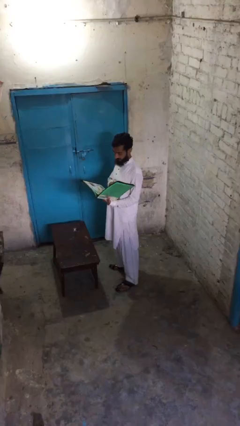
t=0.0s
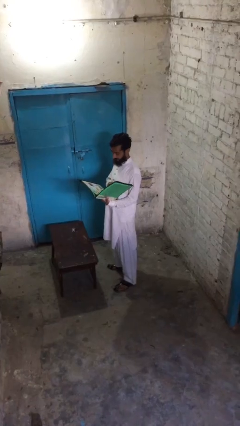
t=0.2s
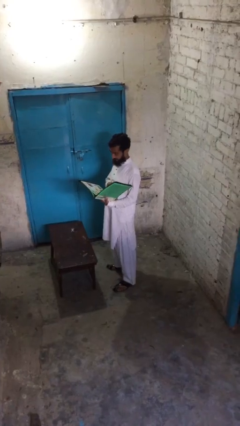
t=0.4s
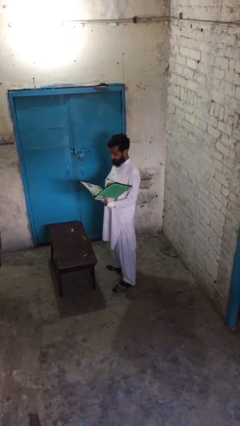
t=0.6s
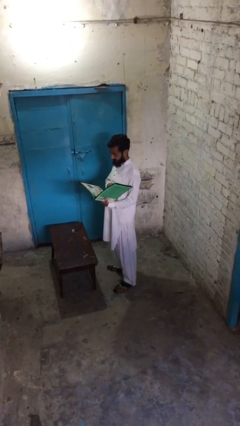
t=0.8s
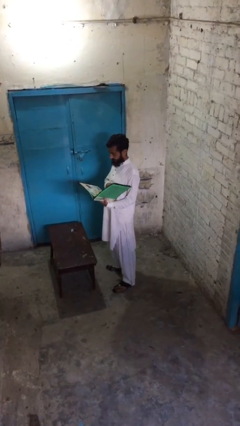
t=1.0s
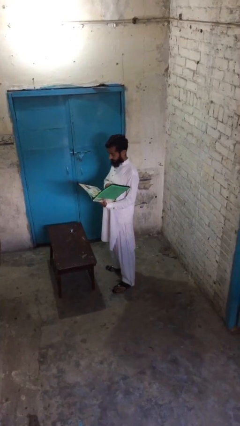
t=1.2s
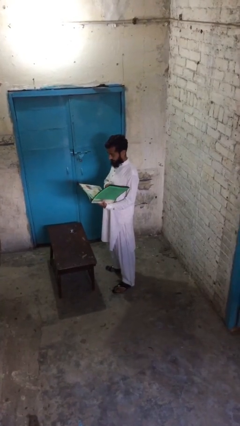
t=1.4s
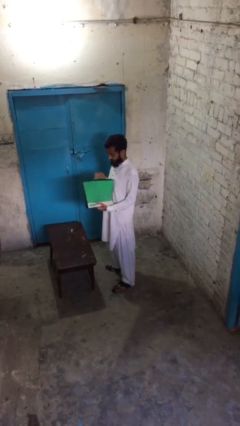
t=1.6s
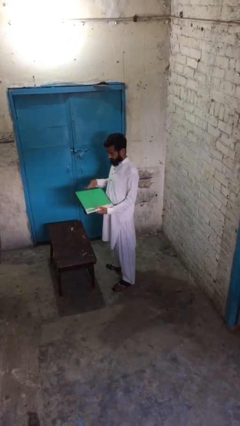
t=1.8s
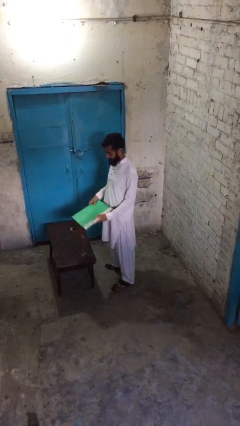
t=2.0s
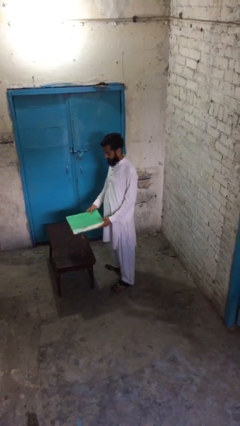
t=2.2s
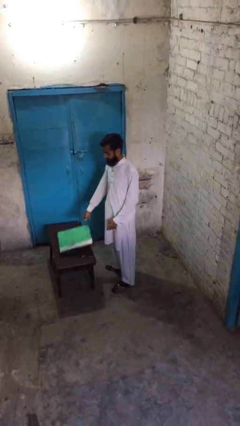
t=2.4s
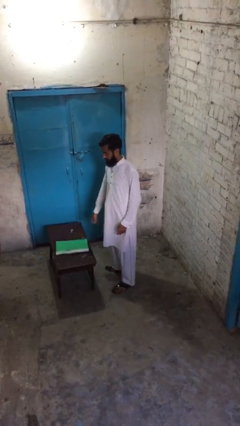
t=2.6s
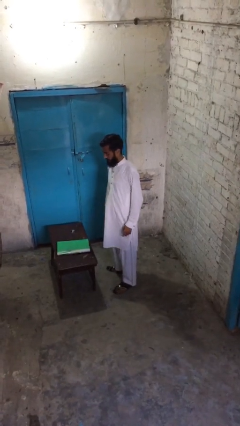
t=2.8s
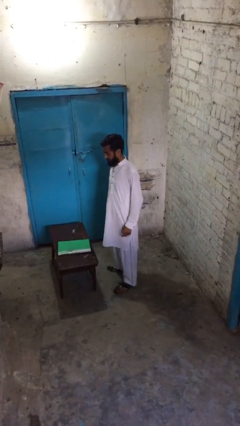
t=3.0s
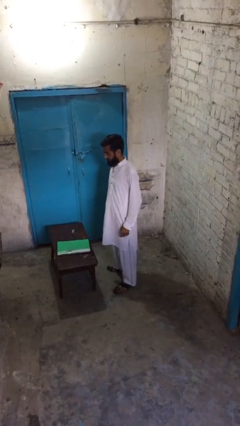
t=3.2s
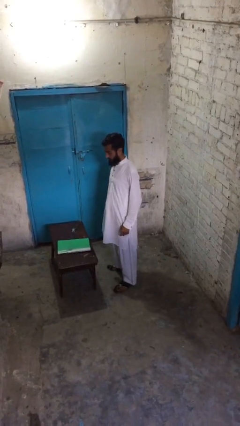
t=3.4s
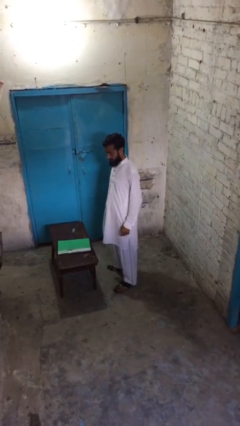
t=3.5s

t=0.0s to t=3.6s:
person puts down object on table

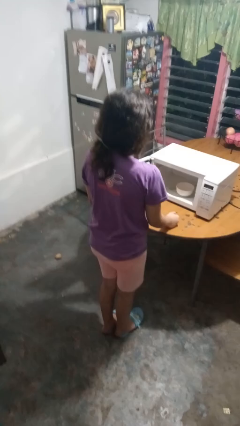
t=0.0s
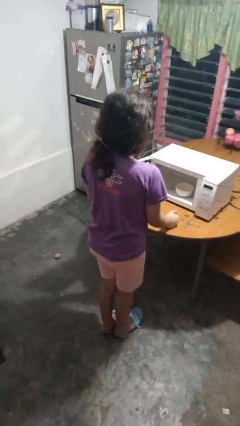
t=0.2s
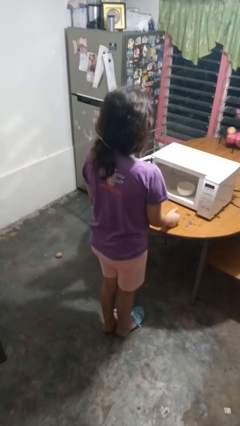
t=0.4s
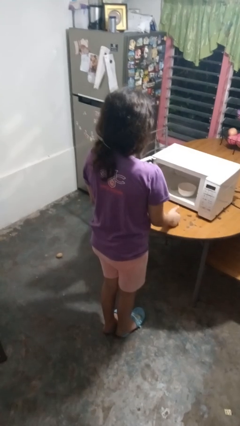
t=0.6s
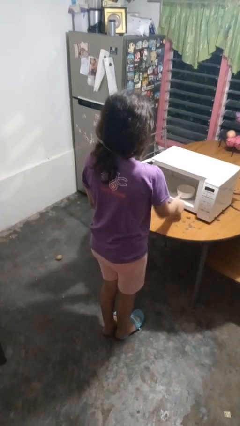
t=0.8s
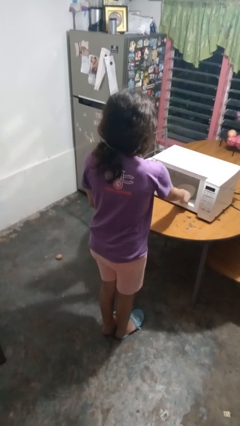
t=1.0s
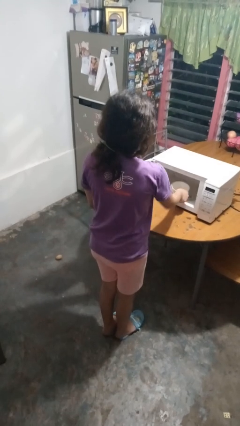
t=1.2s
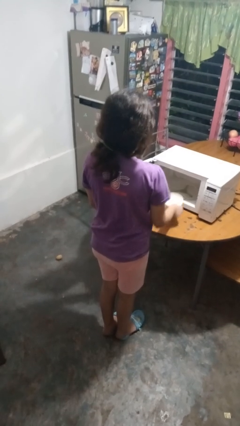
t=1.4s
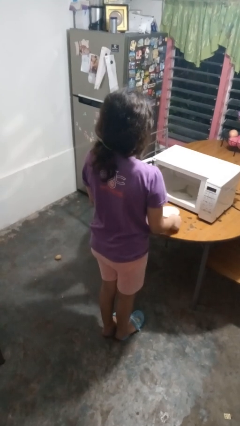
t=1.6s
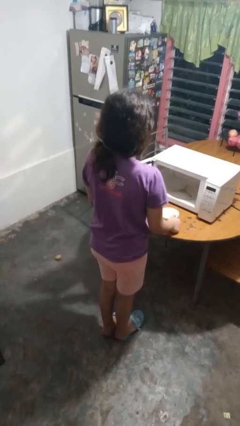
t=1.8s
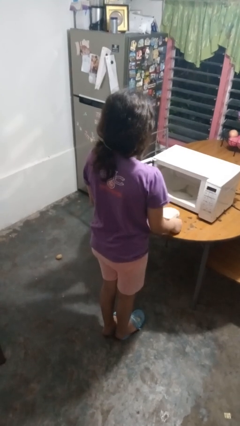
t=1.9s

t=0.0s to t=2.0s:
person takes object from microwave

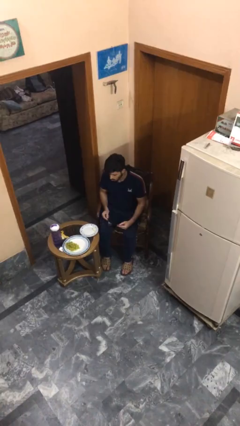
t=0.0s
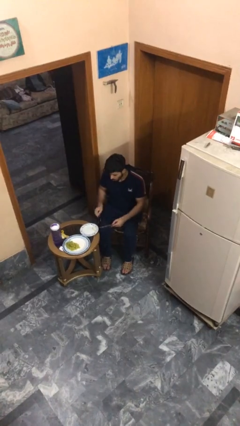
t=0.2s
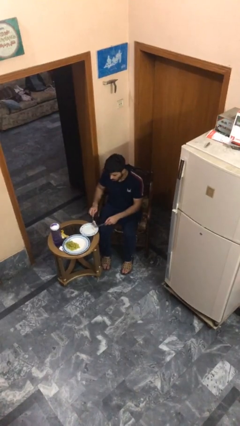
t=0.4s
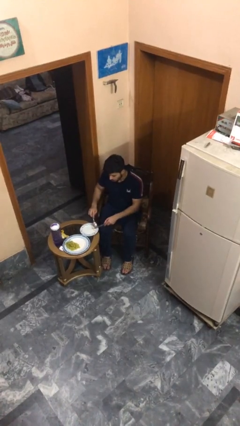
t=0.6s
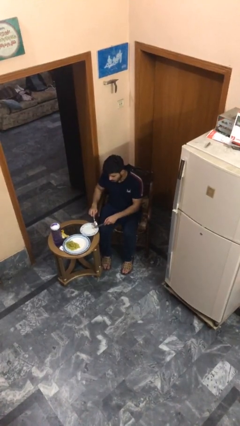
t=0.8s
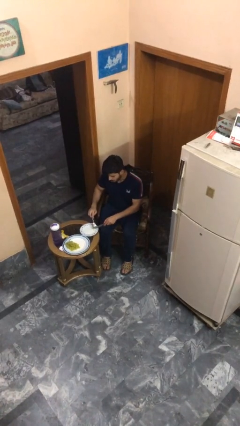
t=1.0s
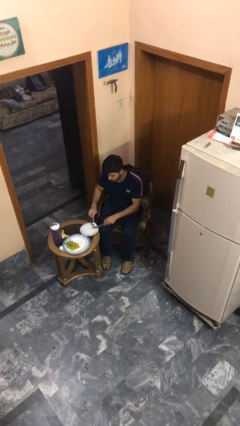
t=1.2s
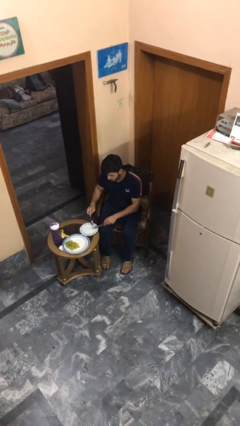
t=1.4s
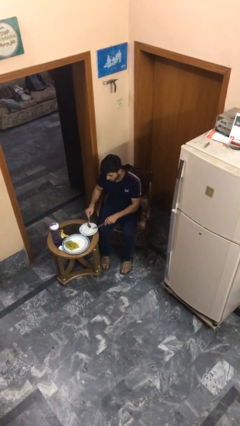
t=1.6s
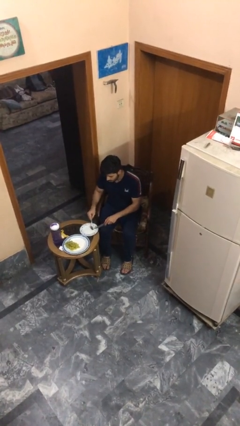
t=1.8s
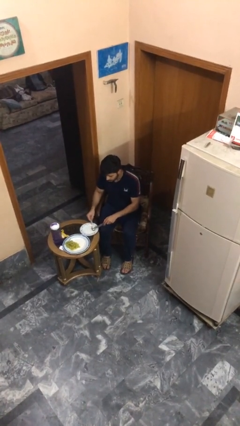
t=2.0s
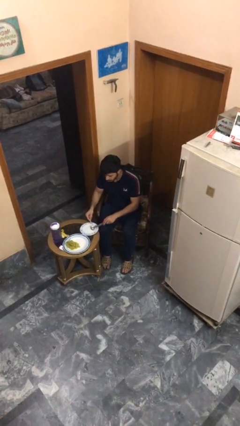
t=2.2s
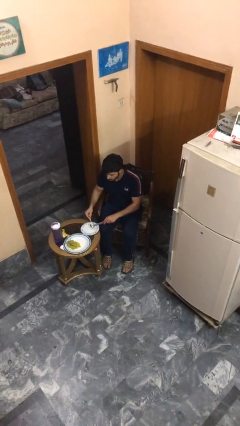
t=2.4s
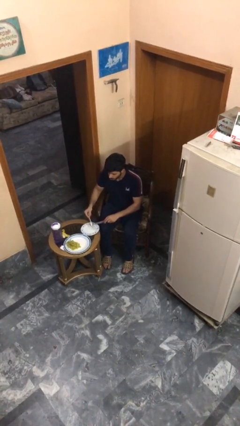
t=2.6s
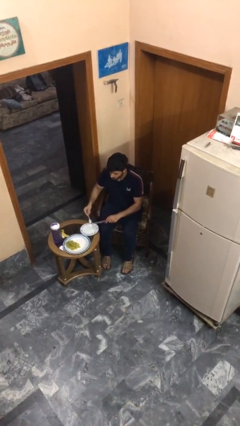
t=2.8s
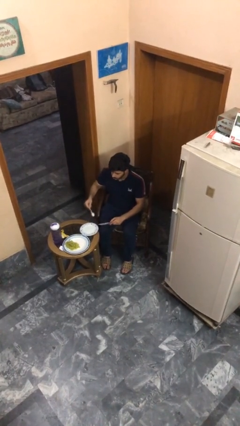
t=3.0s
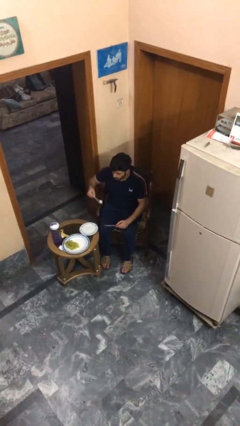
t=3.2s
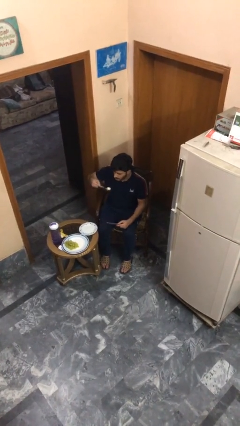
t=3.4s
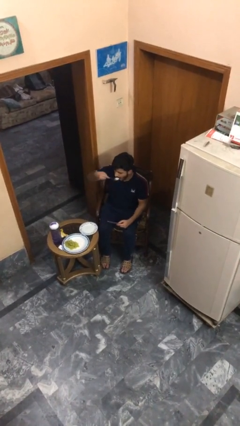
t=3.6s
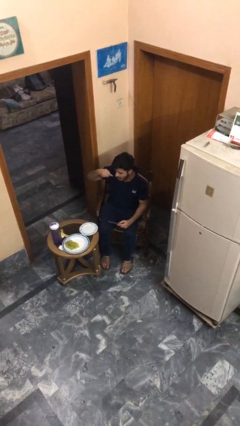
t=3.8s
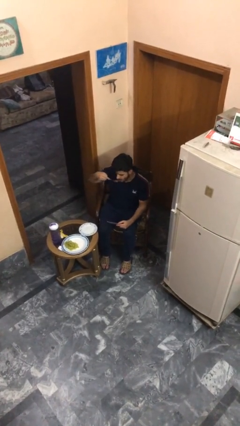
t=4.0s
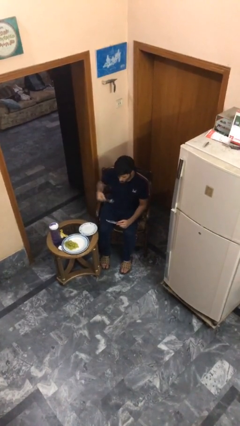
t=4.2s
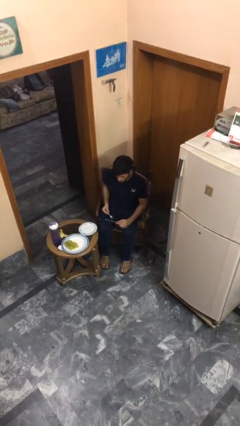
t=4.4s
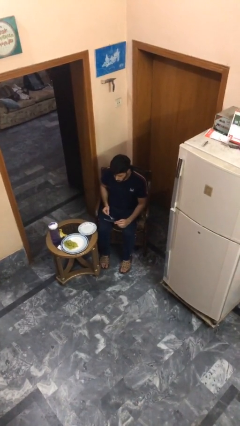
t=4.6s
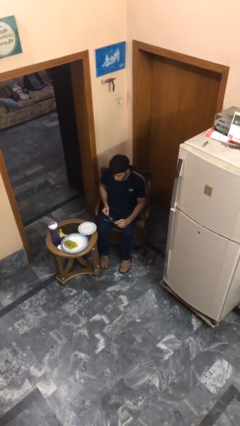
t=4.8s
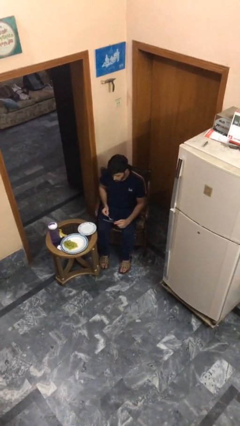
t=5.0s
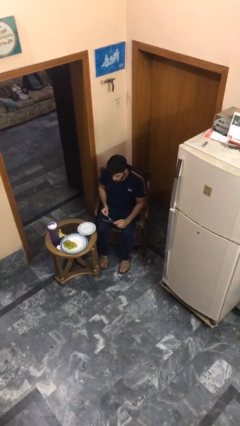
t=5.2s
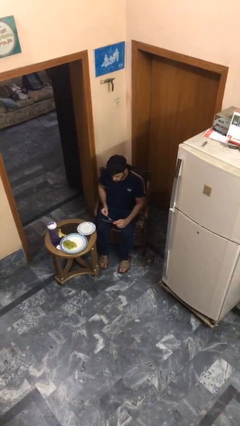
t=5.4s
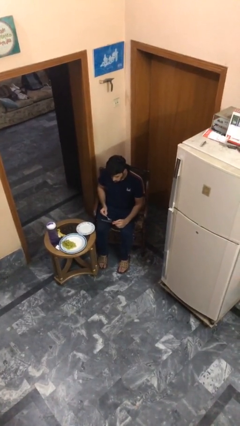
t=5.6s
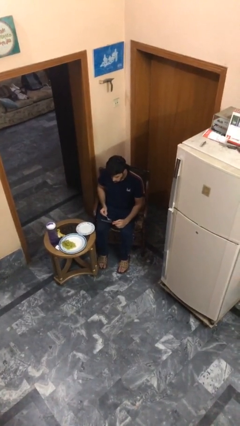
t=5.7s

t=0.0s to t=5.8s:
person eats with utensil

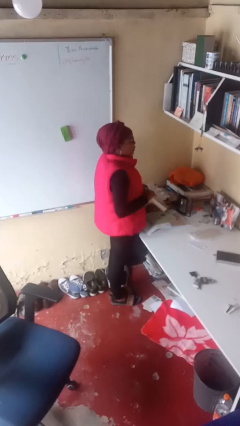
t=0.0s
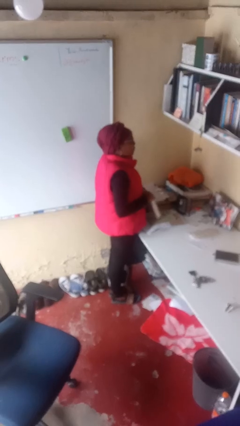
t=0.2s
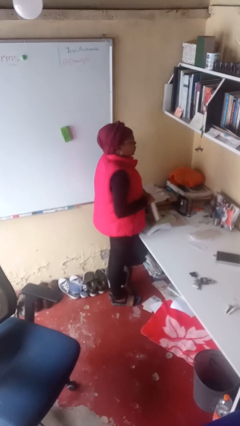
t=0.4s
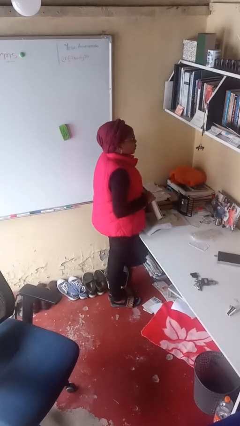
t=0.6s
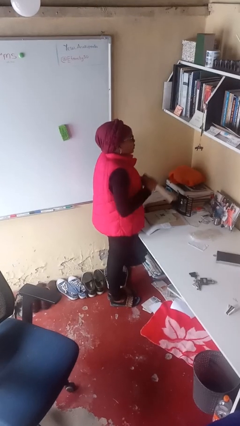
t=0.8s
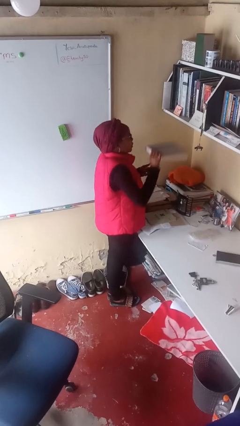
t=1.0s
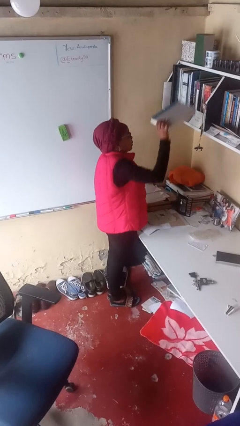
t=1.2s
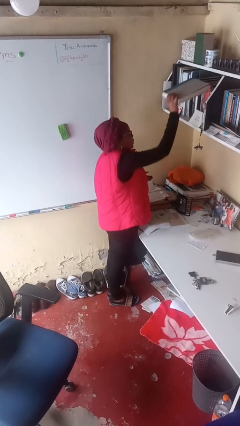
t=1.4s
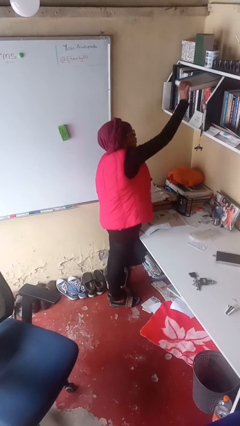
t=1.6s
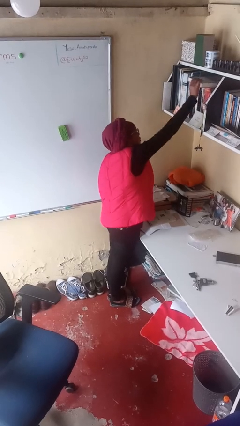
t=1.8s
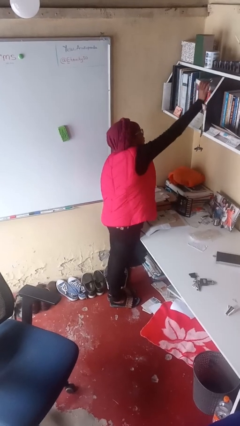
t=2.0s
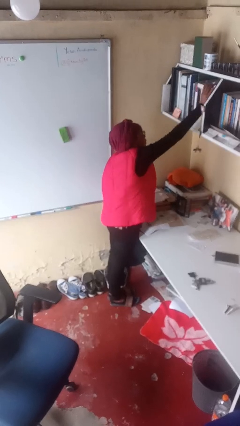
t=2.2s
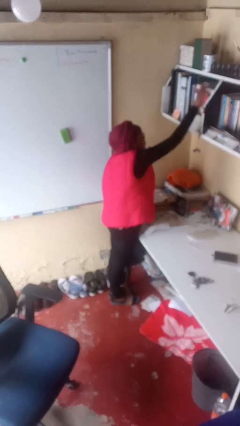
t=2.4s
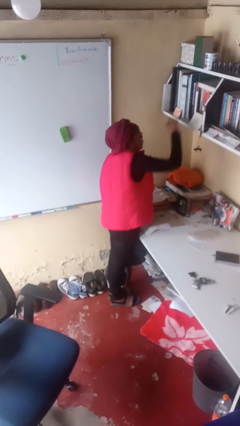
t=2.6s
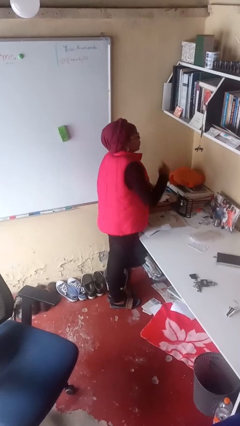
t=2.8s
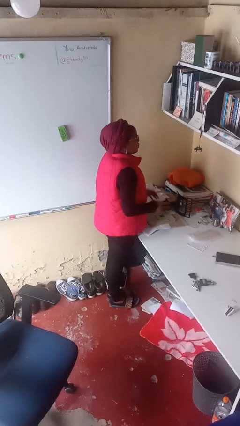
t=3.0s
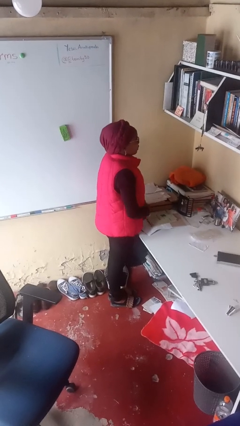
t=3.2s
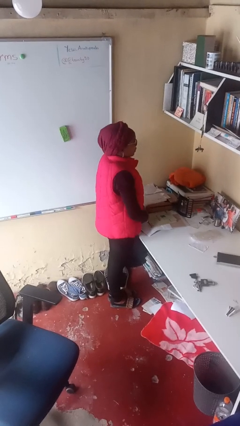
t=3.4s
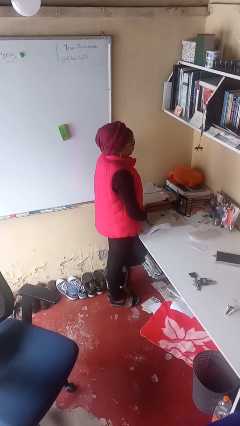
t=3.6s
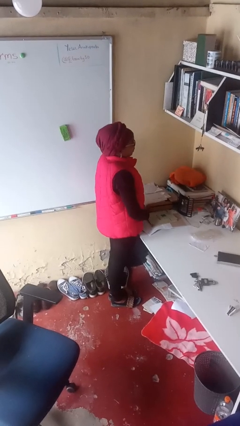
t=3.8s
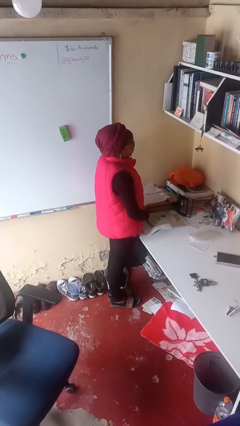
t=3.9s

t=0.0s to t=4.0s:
person puts down object on shelf

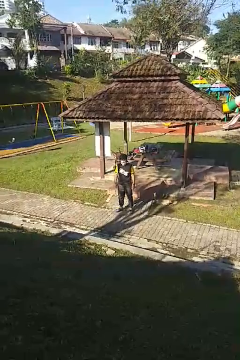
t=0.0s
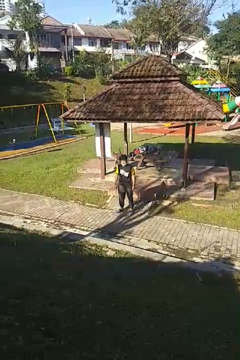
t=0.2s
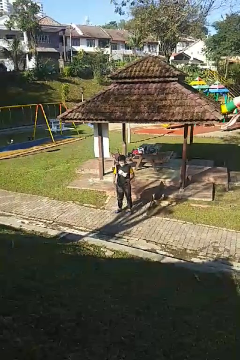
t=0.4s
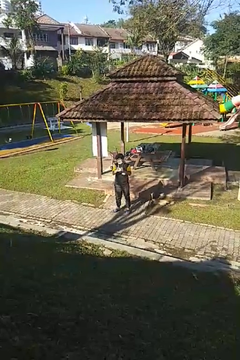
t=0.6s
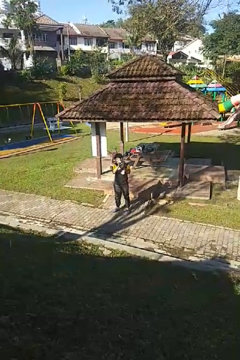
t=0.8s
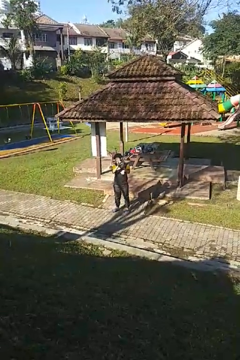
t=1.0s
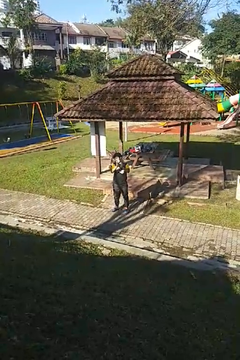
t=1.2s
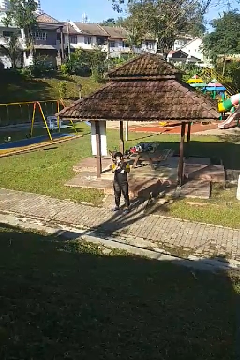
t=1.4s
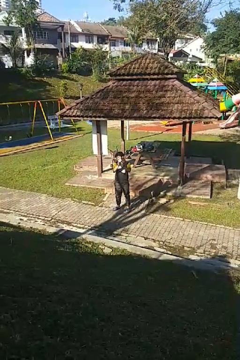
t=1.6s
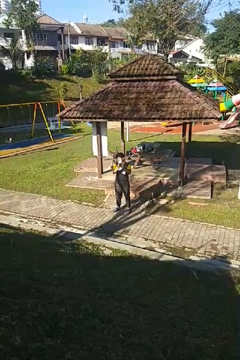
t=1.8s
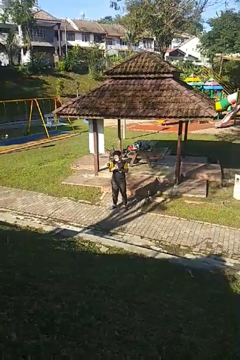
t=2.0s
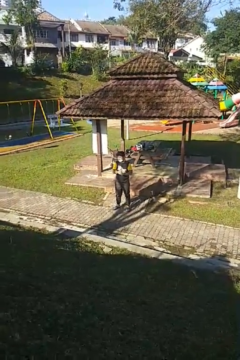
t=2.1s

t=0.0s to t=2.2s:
person claps hands

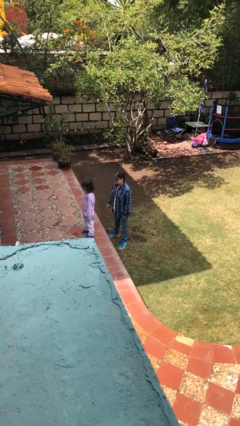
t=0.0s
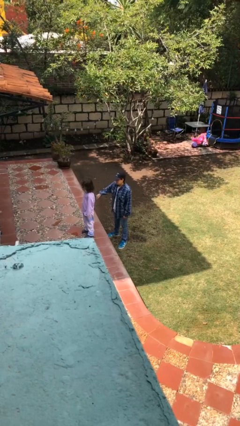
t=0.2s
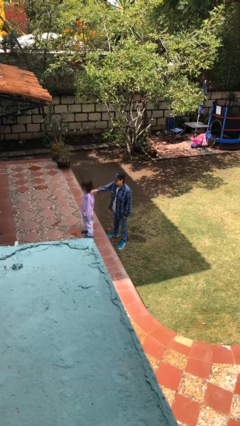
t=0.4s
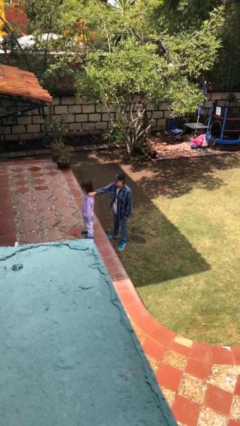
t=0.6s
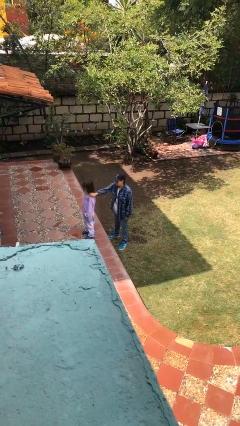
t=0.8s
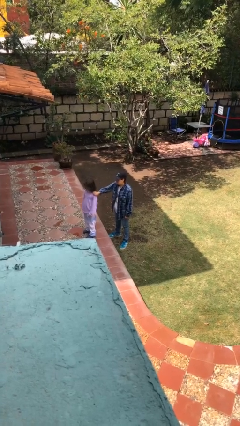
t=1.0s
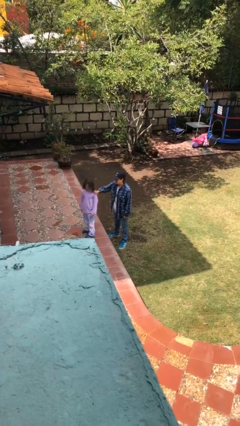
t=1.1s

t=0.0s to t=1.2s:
person grabs person by shoulder
